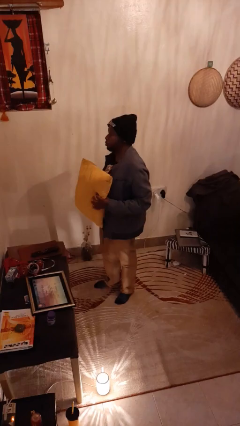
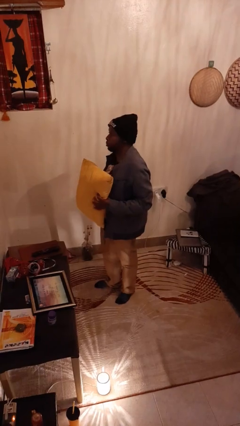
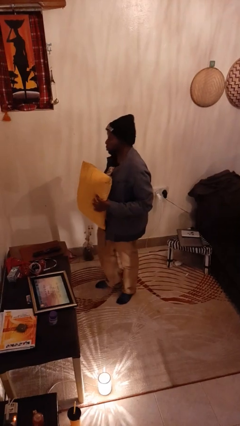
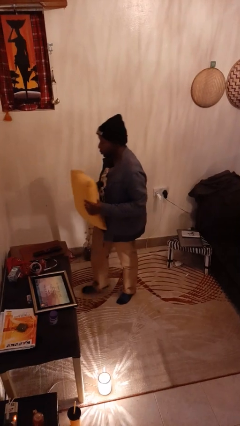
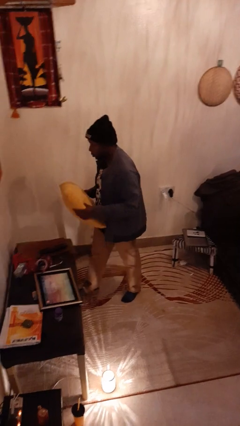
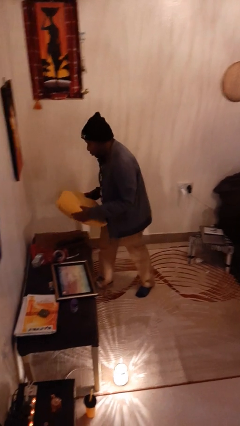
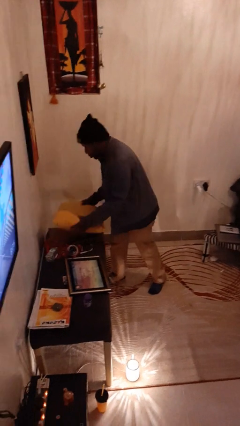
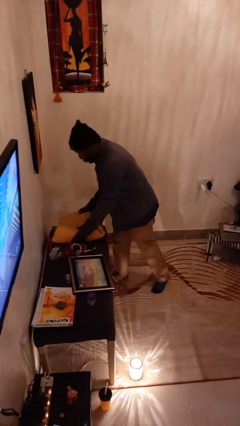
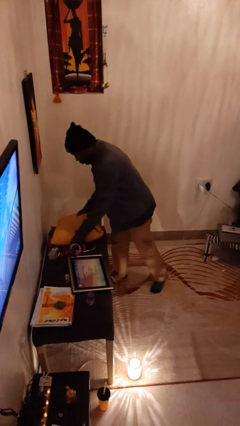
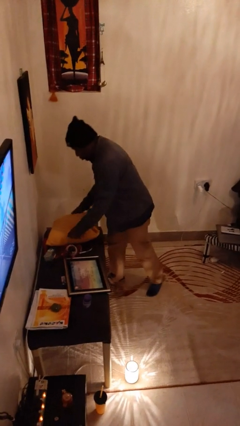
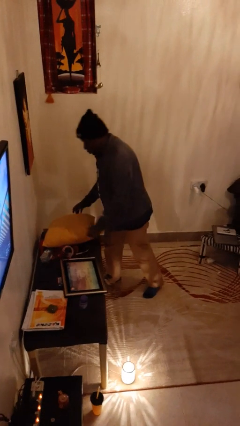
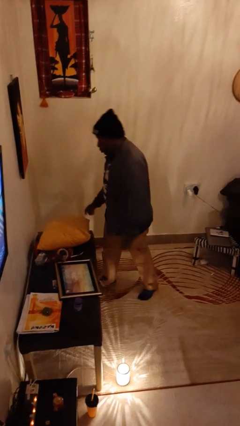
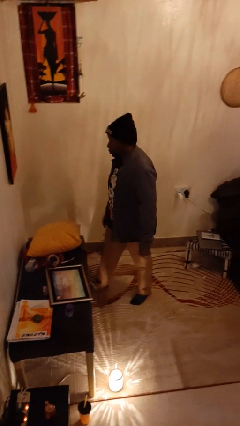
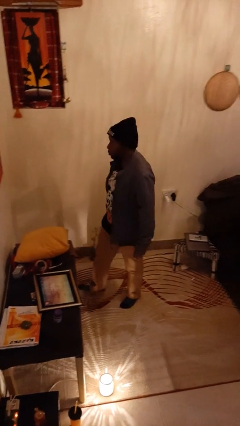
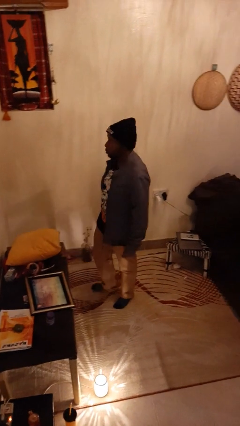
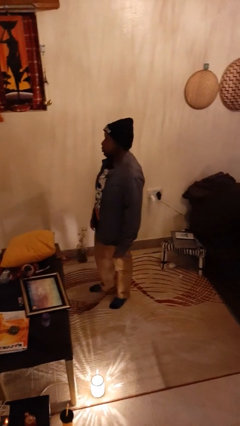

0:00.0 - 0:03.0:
person puts down object on countertop

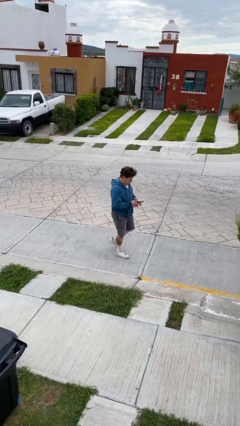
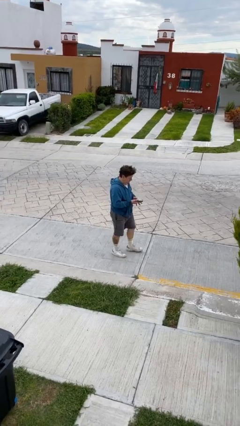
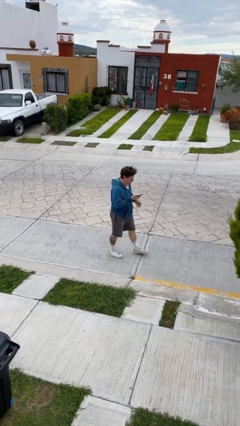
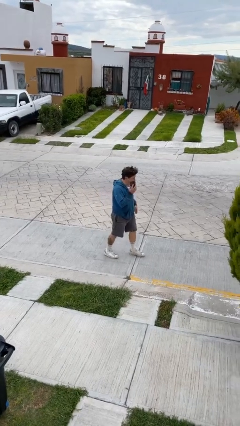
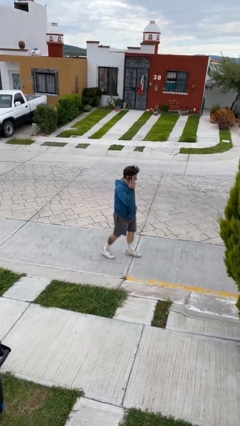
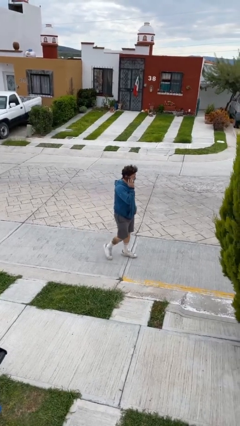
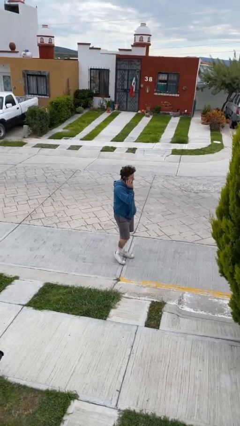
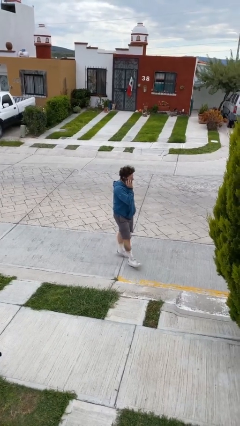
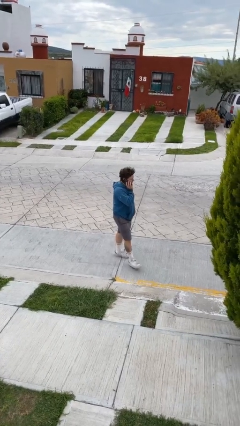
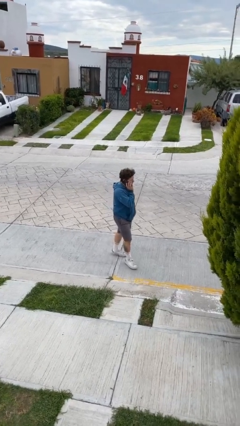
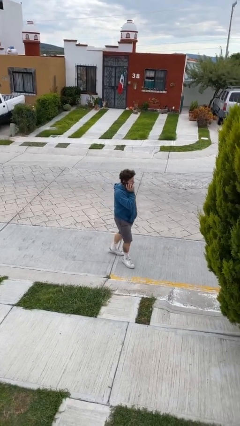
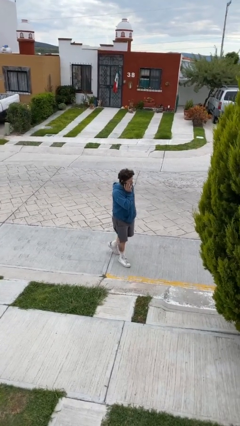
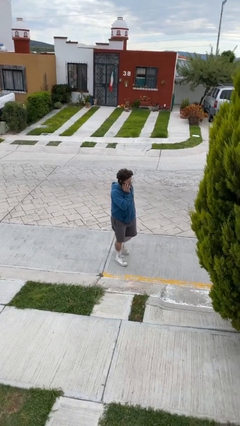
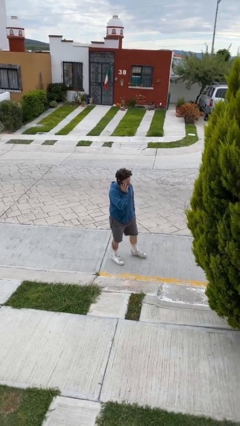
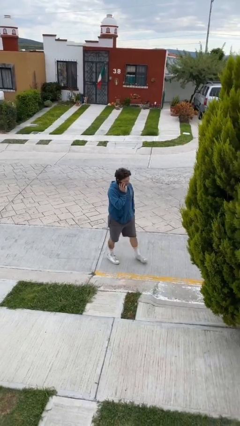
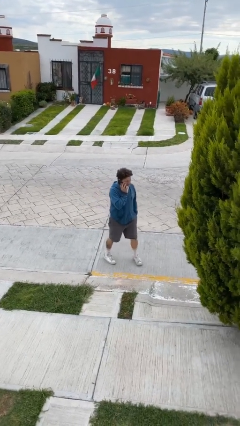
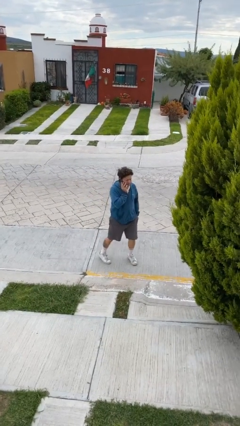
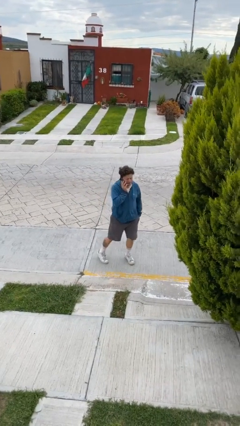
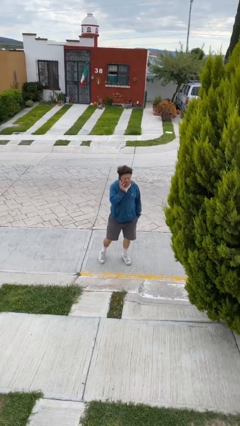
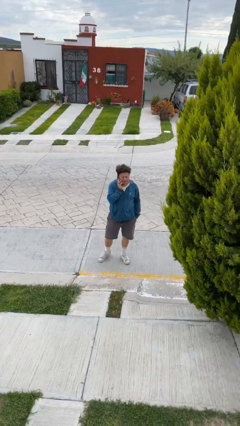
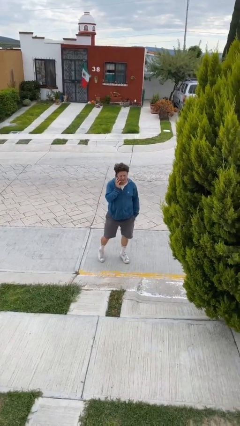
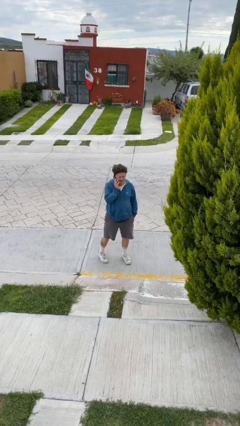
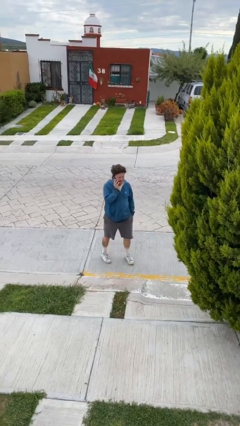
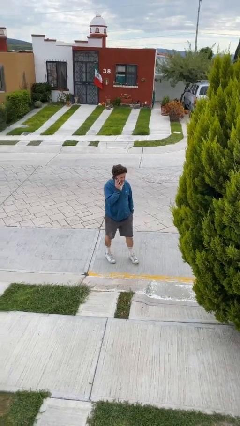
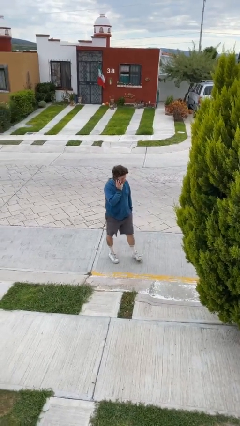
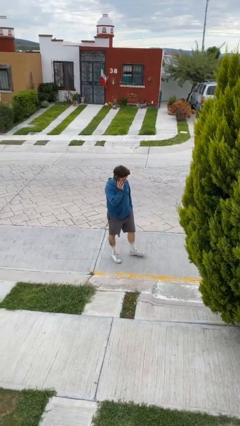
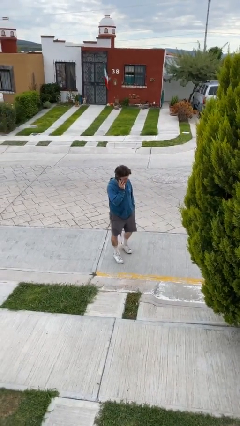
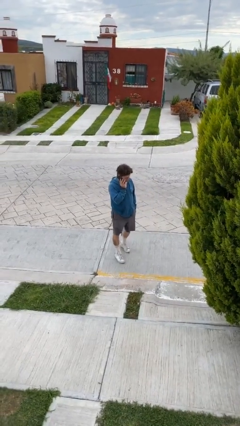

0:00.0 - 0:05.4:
person talks on phone

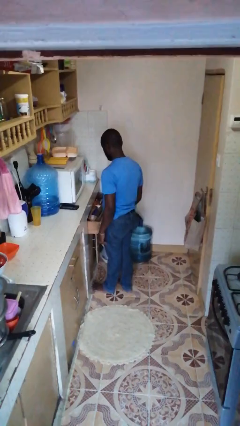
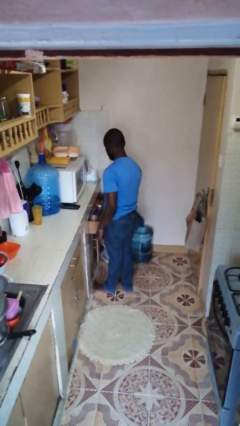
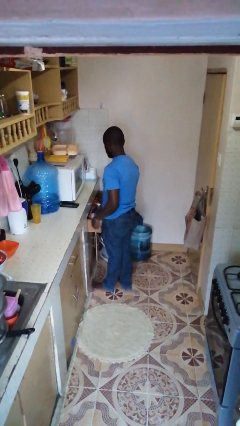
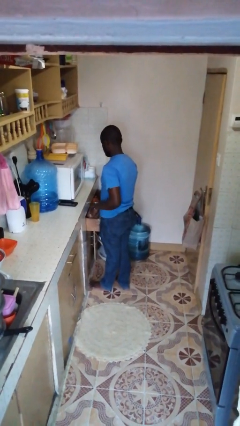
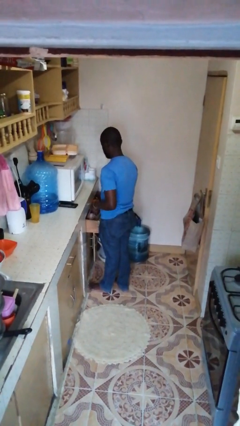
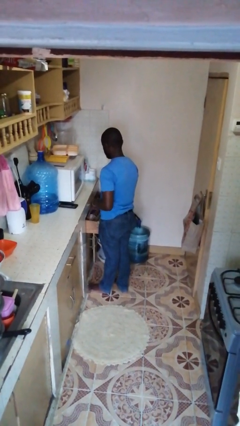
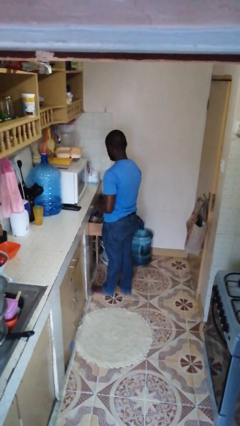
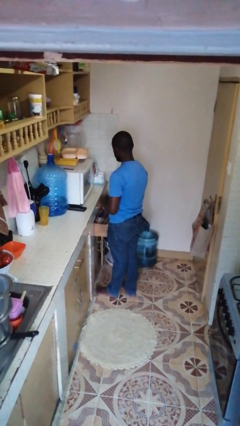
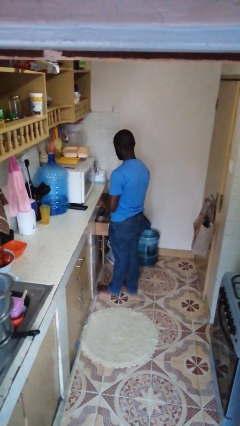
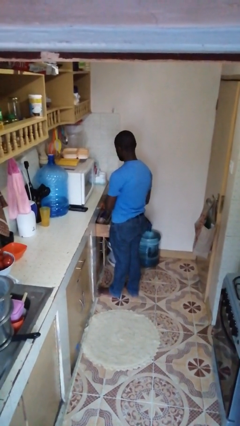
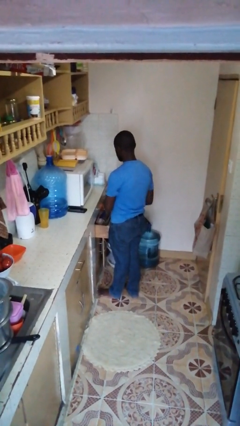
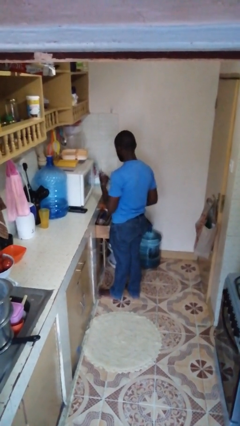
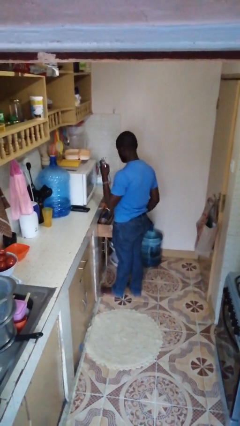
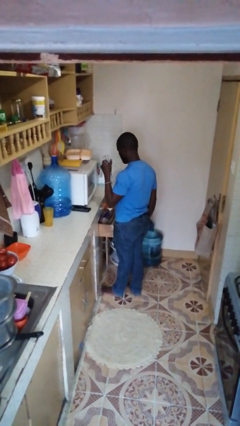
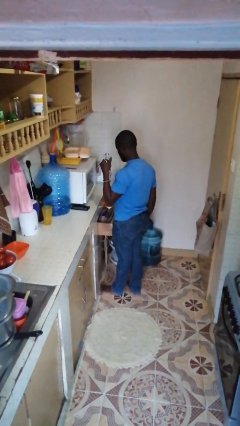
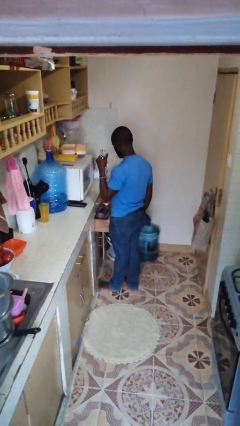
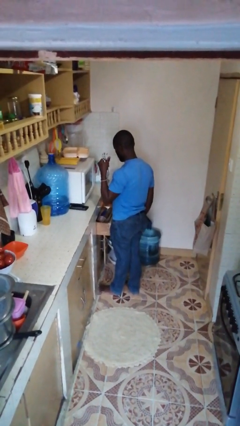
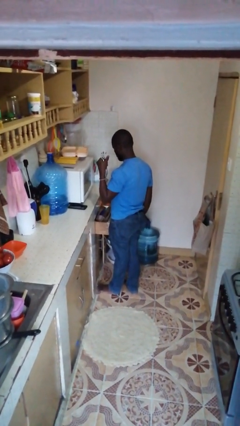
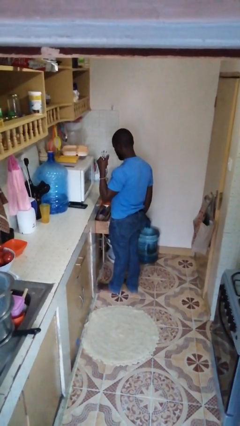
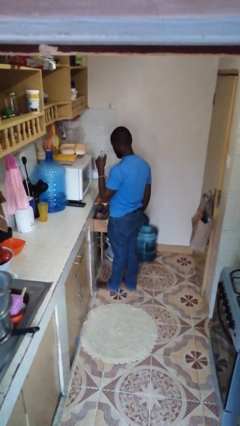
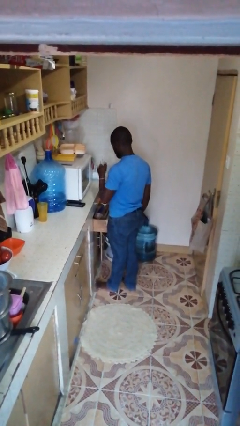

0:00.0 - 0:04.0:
person takes object from kitchen drawer

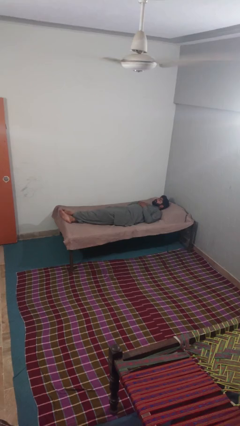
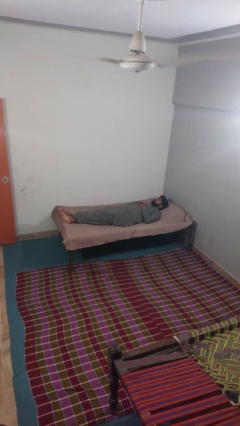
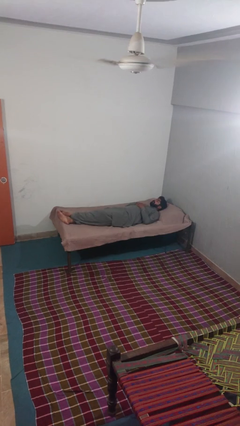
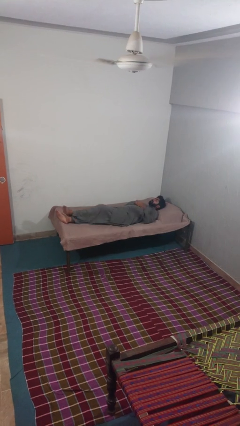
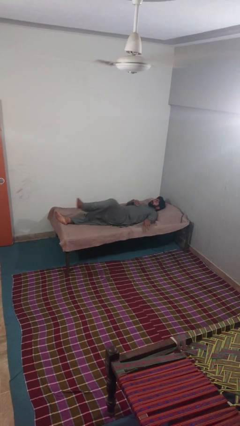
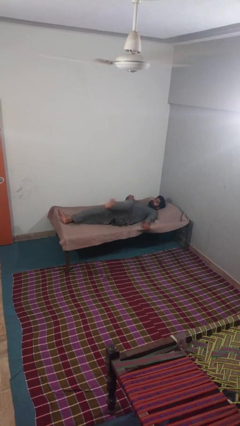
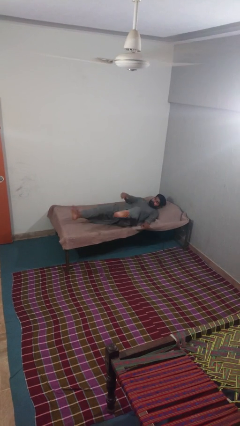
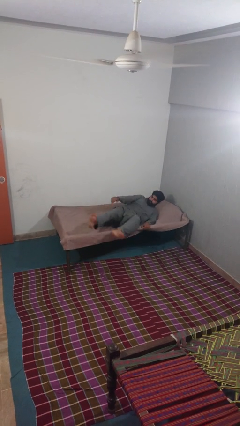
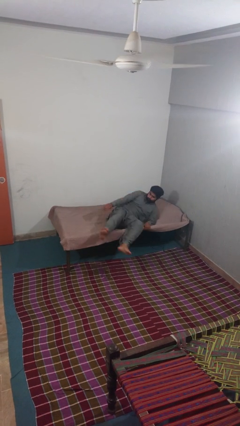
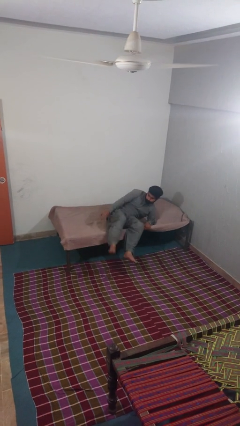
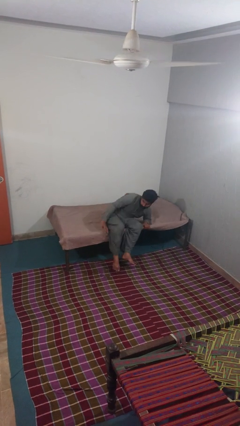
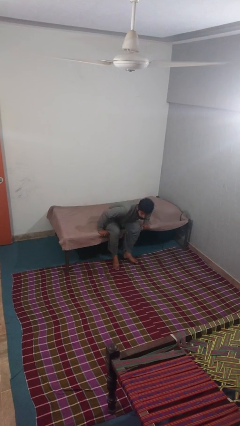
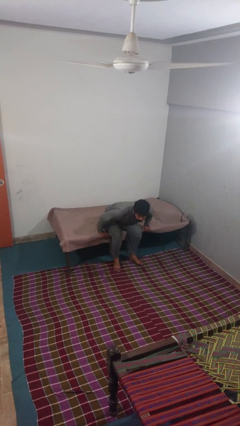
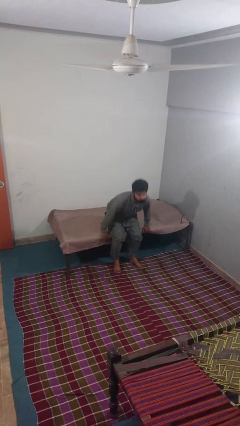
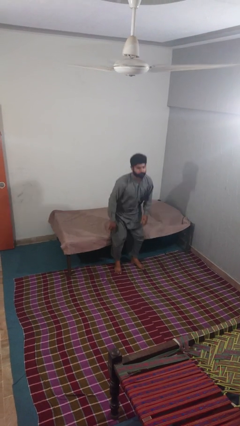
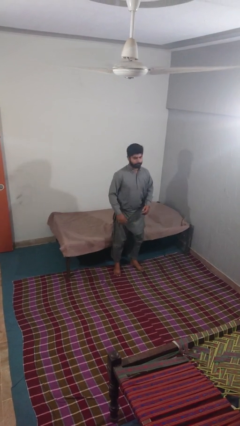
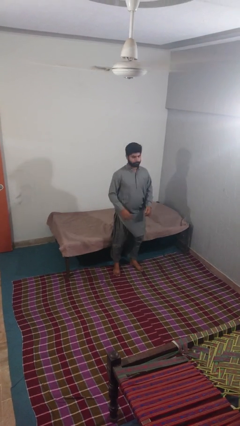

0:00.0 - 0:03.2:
person stands up

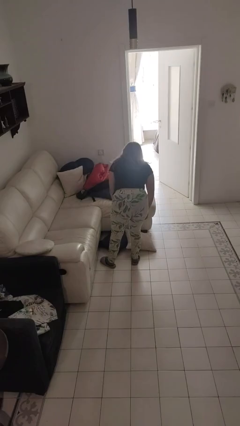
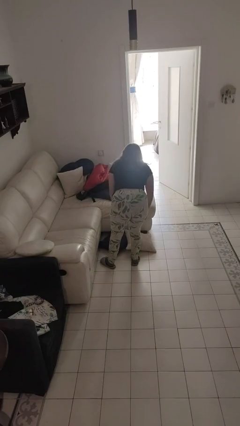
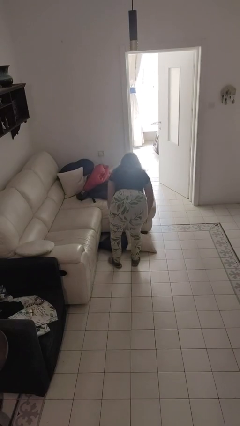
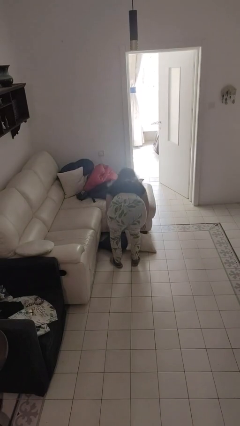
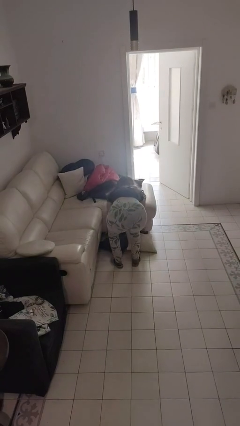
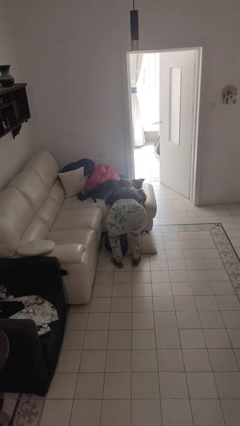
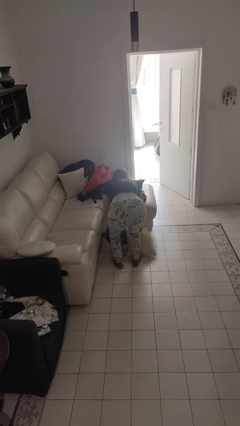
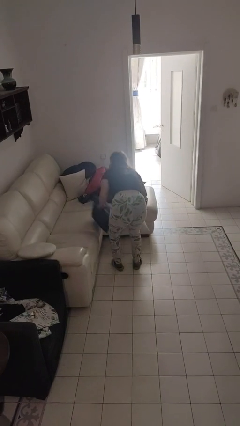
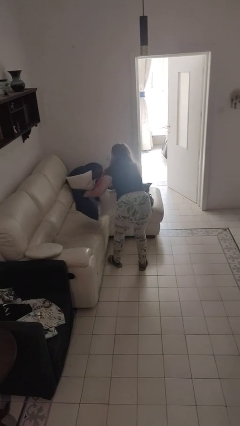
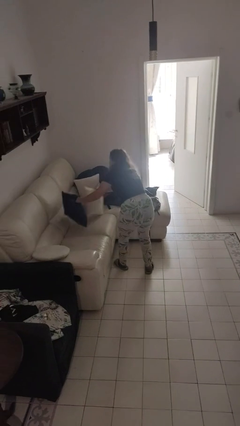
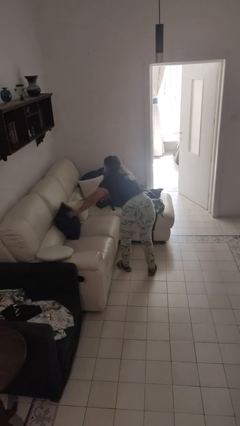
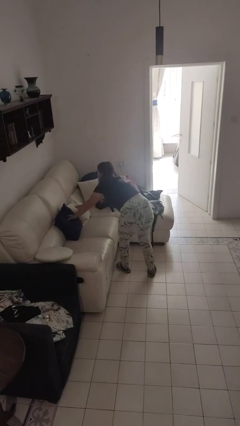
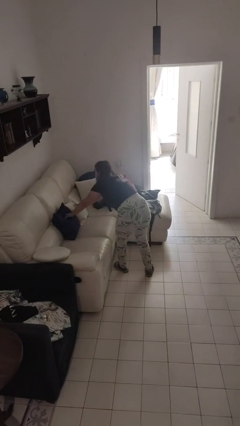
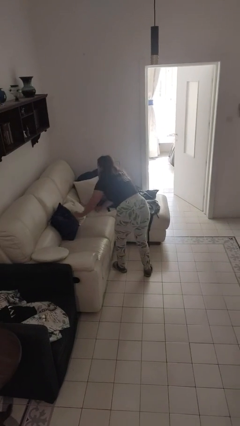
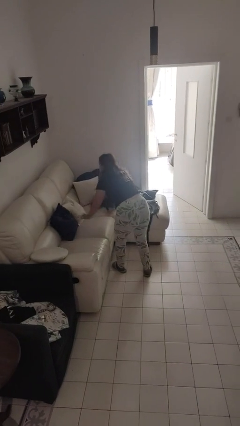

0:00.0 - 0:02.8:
person sets upright furniture
